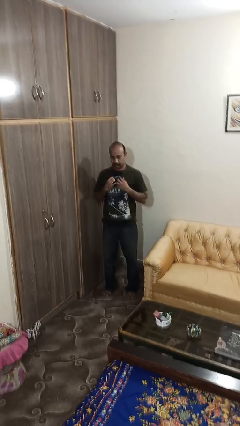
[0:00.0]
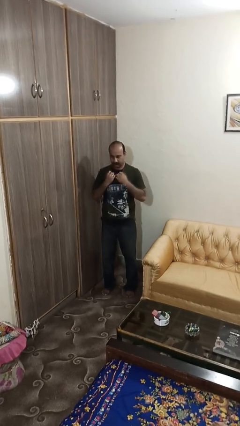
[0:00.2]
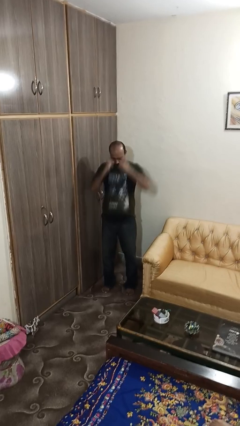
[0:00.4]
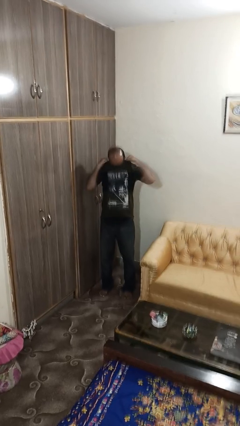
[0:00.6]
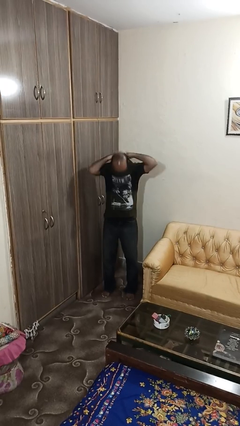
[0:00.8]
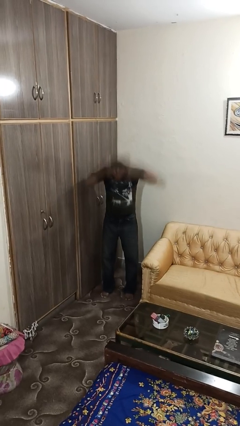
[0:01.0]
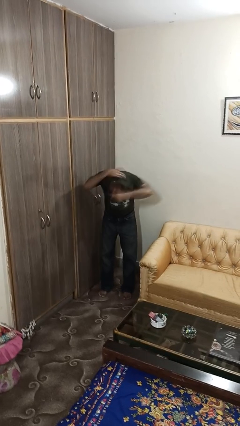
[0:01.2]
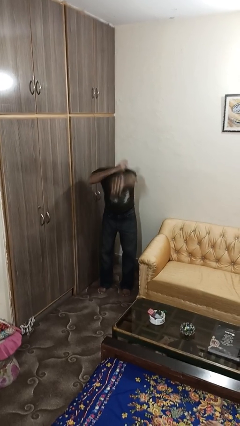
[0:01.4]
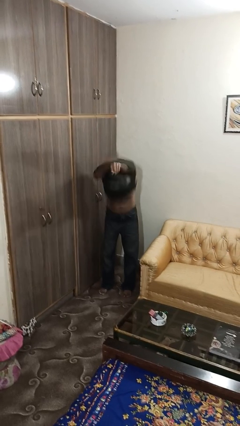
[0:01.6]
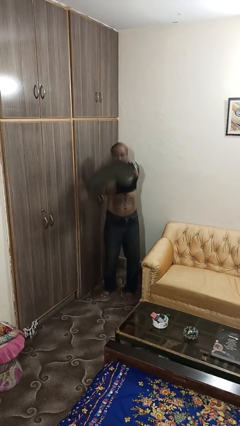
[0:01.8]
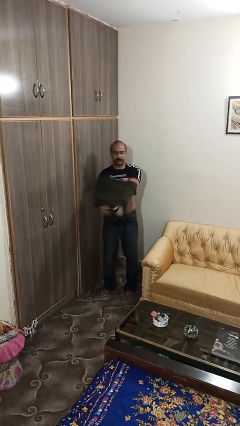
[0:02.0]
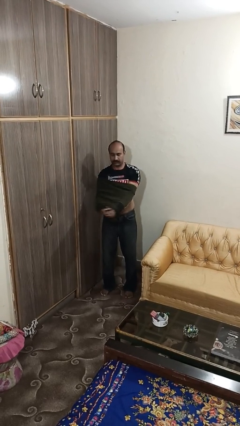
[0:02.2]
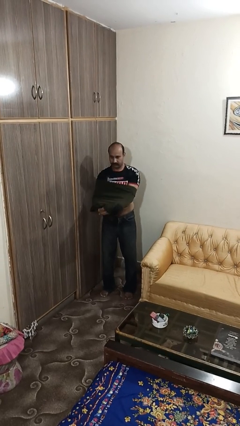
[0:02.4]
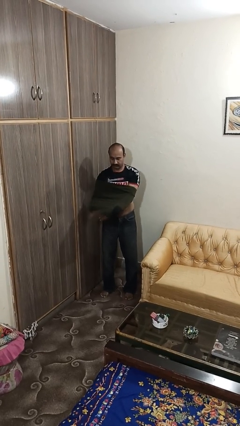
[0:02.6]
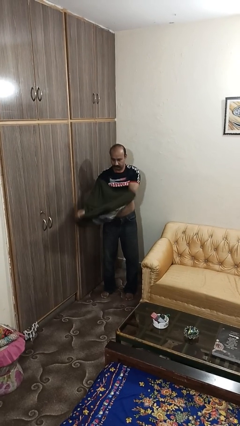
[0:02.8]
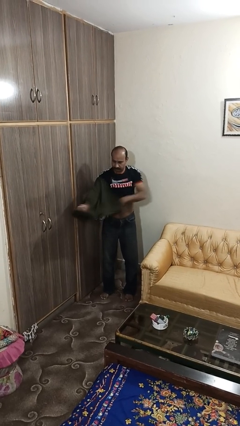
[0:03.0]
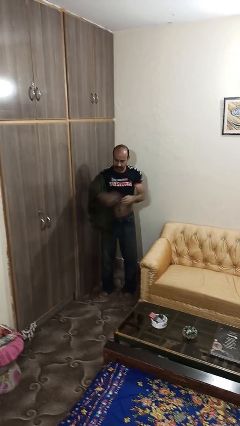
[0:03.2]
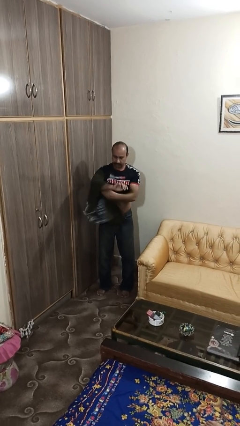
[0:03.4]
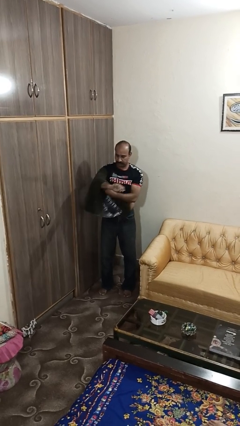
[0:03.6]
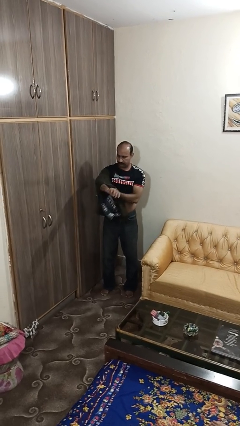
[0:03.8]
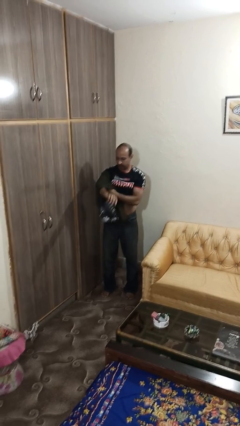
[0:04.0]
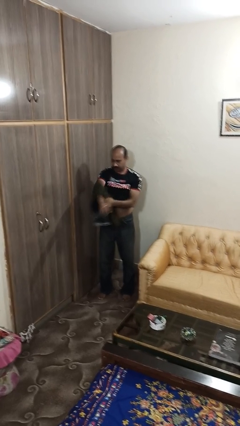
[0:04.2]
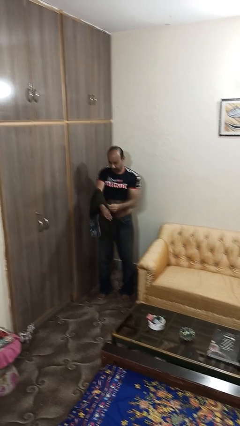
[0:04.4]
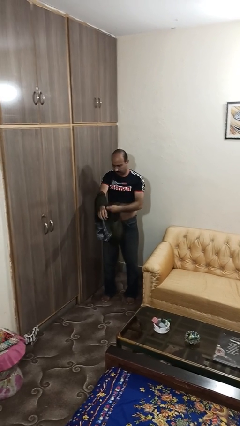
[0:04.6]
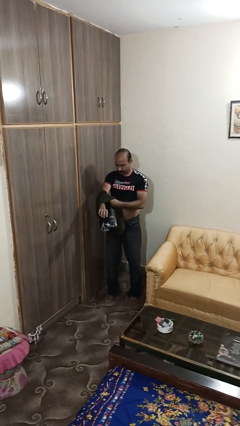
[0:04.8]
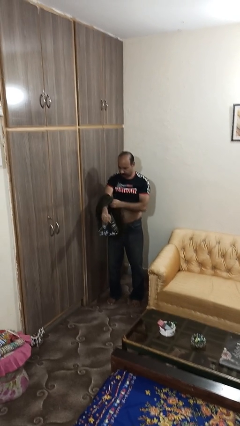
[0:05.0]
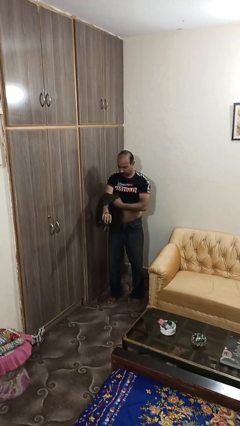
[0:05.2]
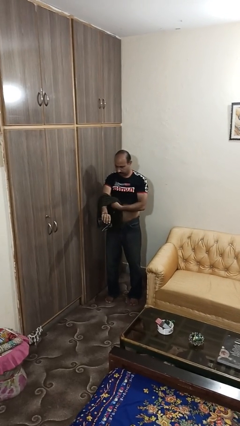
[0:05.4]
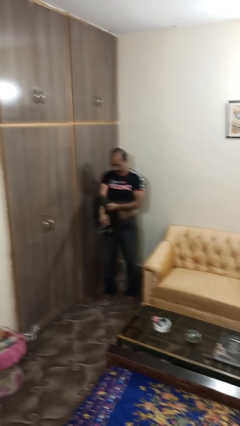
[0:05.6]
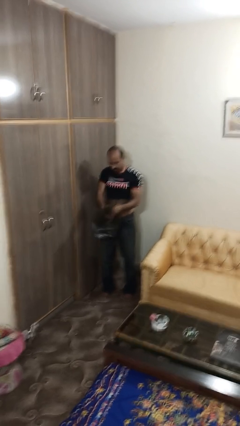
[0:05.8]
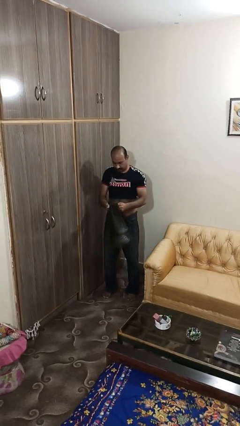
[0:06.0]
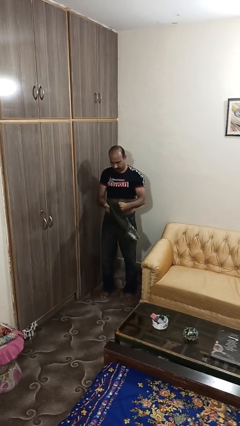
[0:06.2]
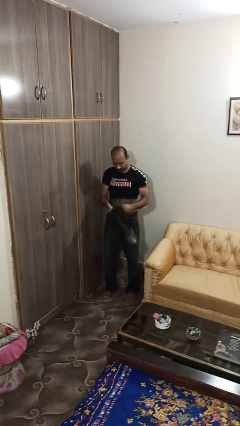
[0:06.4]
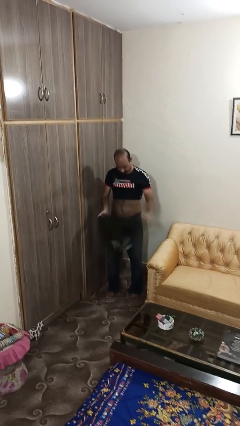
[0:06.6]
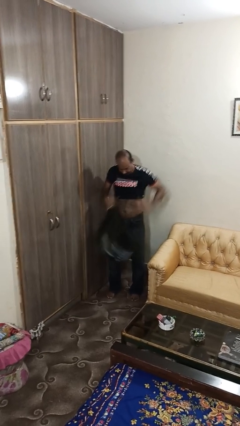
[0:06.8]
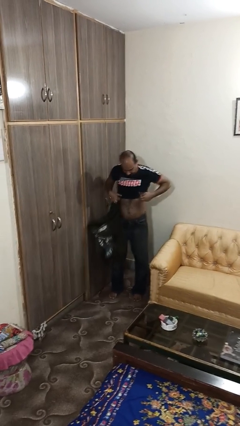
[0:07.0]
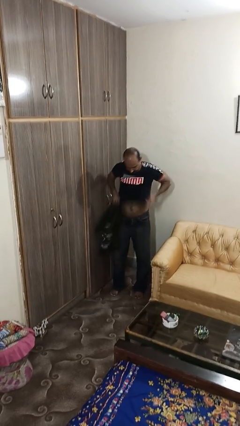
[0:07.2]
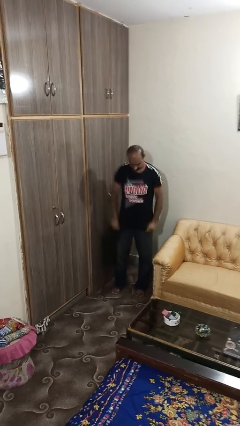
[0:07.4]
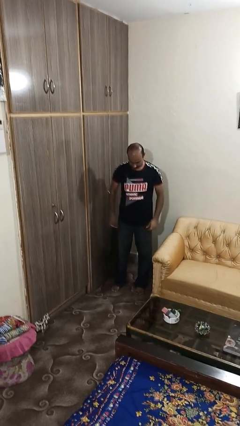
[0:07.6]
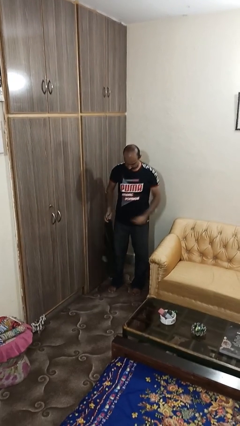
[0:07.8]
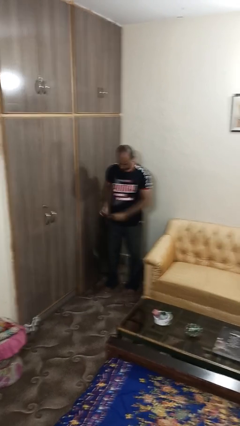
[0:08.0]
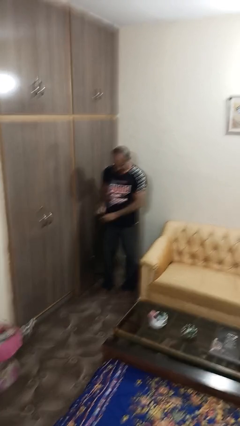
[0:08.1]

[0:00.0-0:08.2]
person takes off shirt

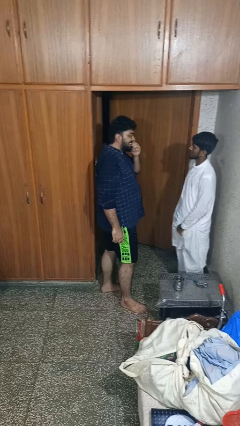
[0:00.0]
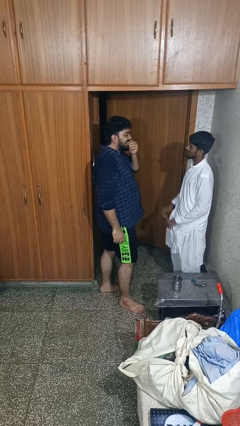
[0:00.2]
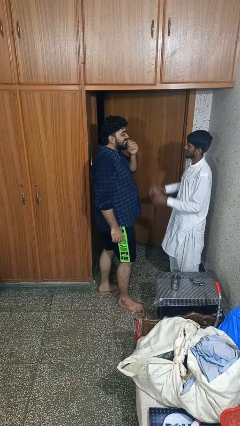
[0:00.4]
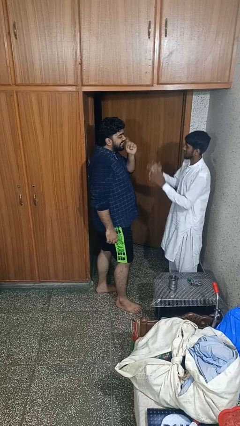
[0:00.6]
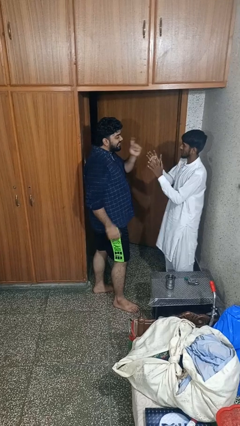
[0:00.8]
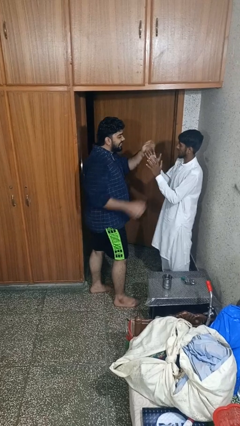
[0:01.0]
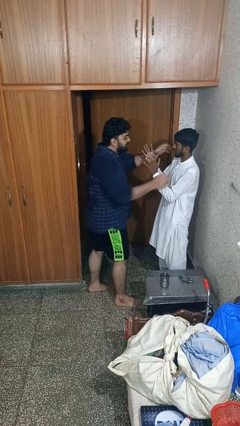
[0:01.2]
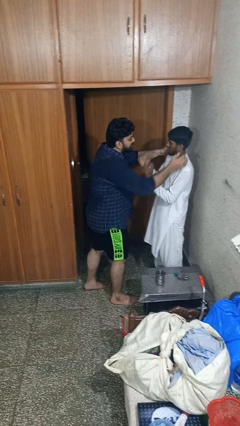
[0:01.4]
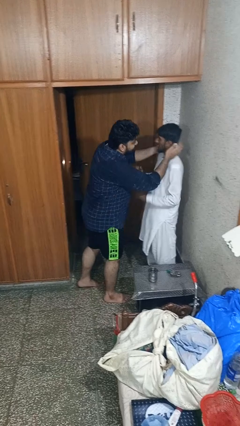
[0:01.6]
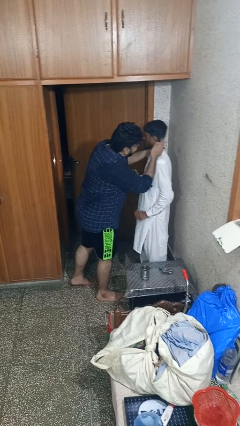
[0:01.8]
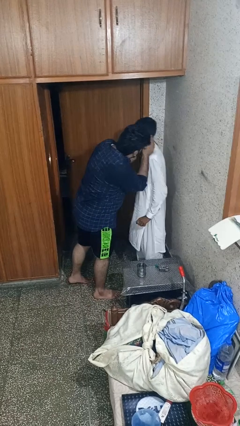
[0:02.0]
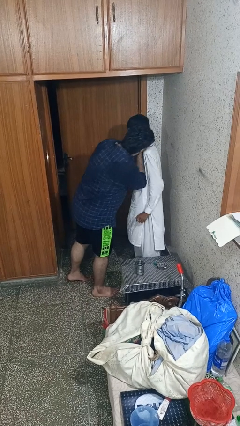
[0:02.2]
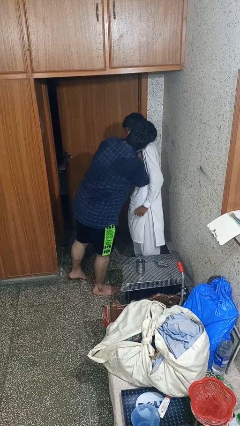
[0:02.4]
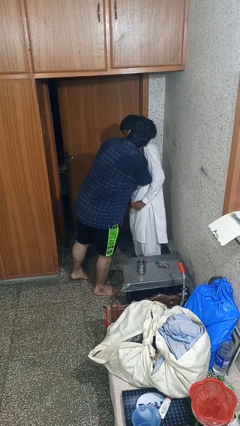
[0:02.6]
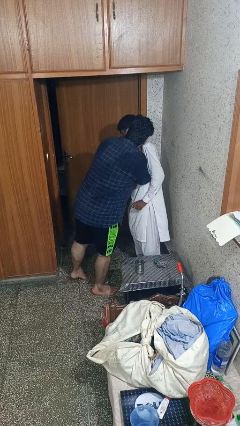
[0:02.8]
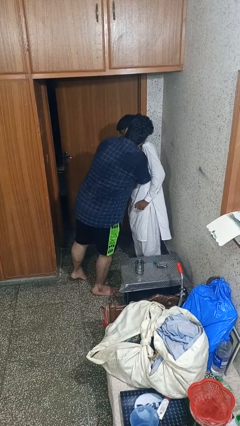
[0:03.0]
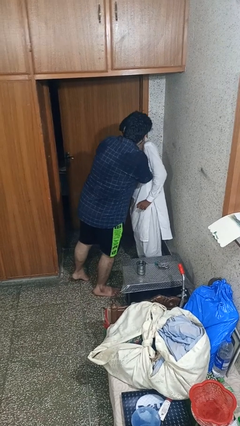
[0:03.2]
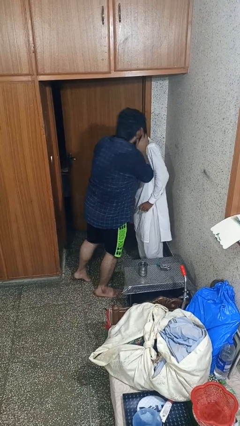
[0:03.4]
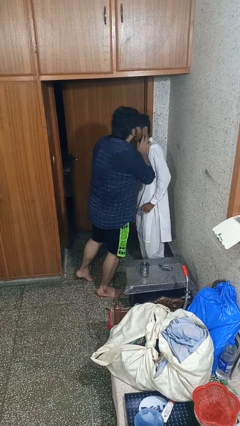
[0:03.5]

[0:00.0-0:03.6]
person kisses cheek of person

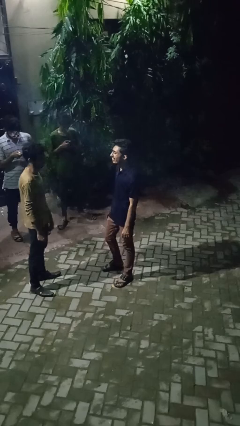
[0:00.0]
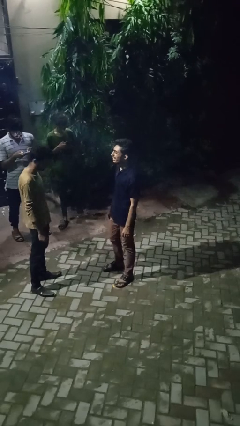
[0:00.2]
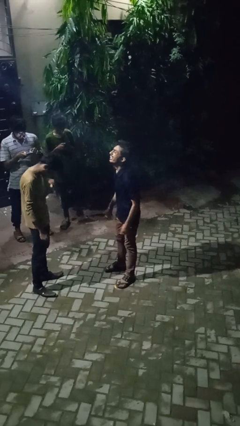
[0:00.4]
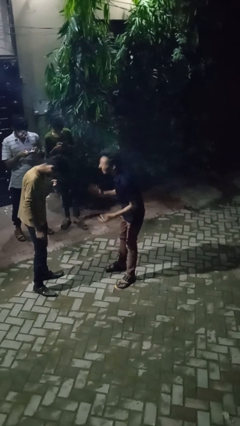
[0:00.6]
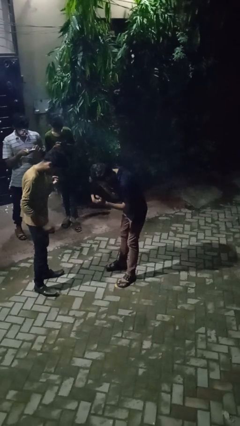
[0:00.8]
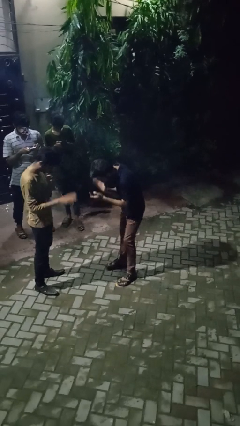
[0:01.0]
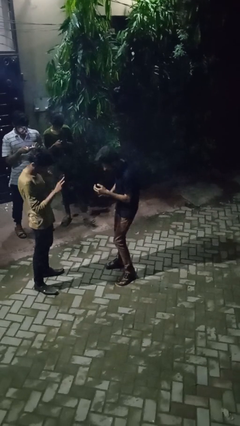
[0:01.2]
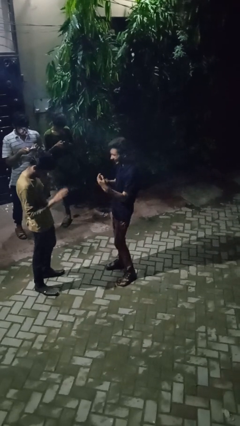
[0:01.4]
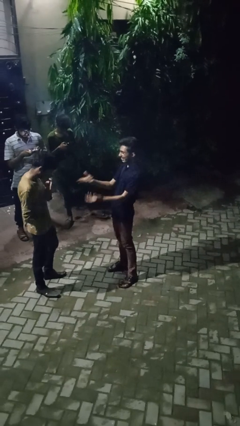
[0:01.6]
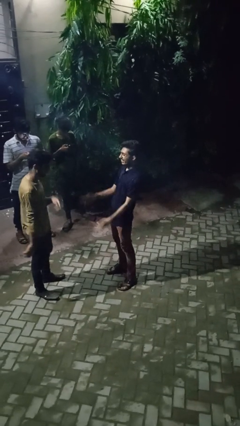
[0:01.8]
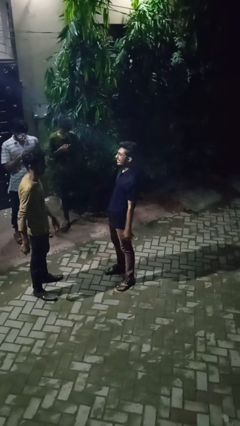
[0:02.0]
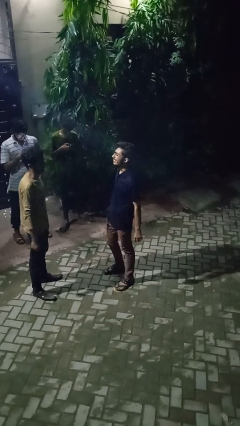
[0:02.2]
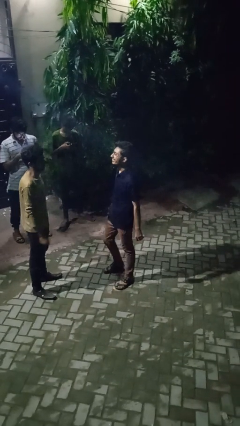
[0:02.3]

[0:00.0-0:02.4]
person laughs with person

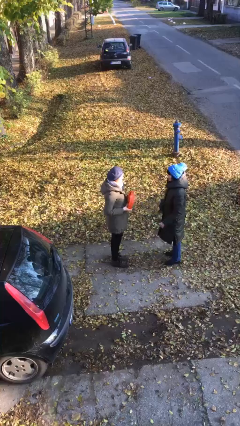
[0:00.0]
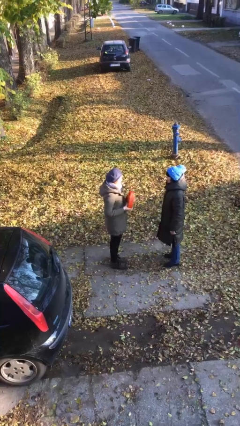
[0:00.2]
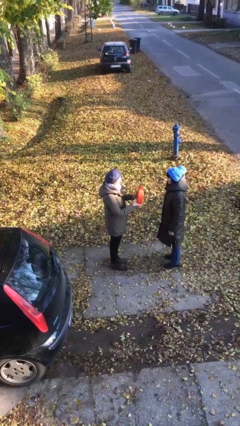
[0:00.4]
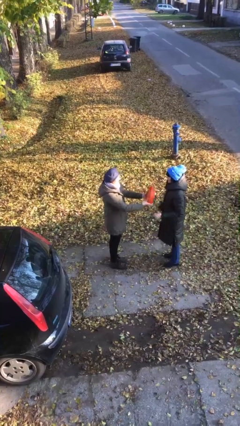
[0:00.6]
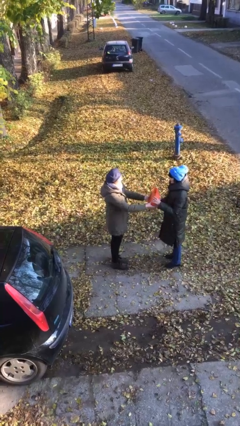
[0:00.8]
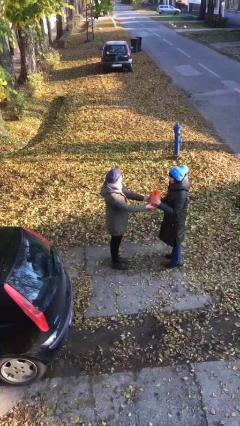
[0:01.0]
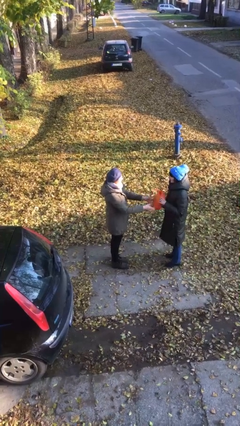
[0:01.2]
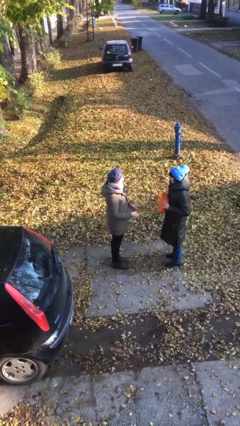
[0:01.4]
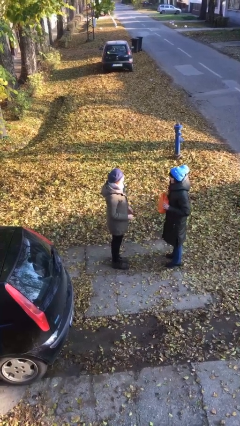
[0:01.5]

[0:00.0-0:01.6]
person transfers object to person

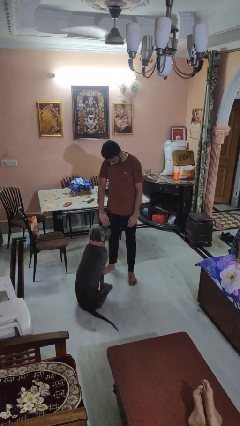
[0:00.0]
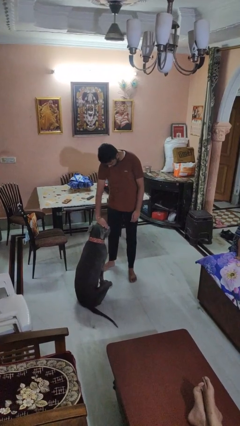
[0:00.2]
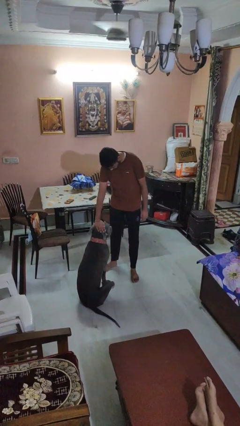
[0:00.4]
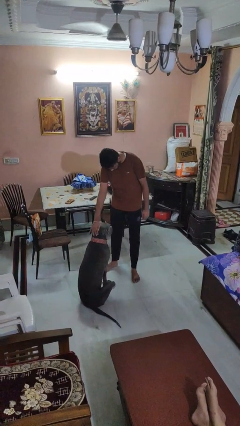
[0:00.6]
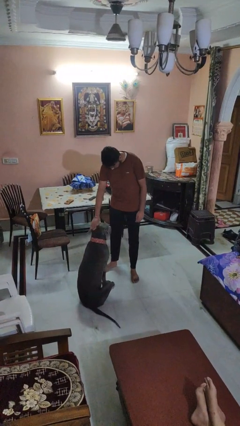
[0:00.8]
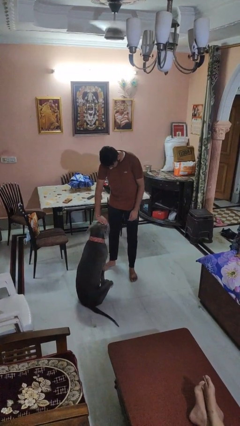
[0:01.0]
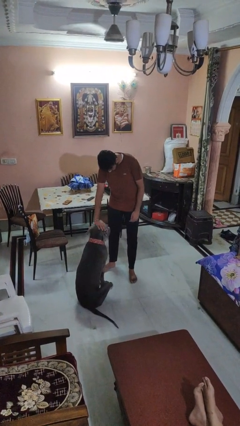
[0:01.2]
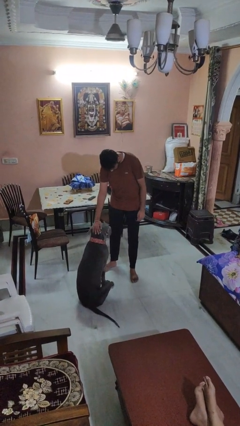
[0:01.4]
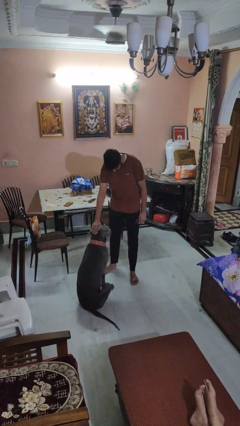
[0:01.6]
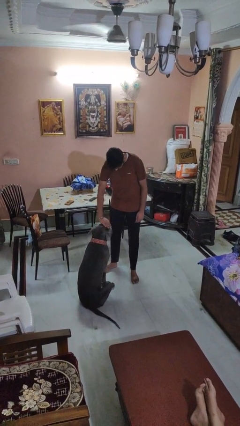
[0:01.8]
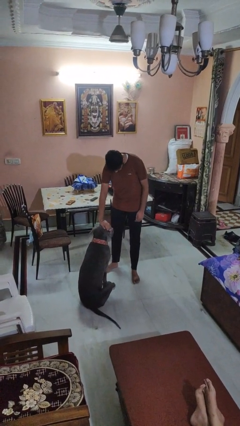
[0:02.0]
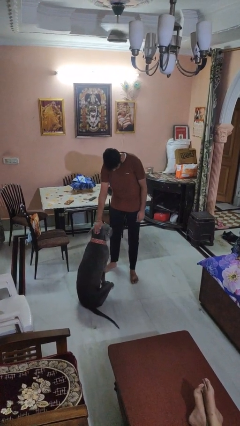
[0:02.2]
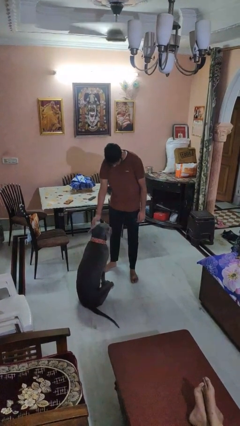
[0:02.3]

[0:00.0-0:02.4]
person pets dog
